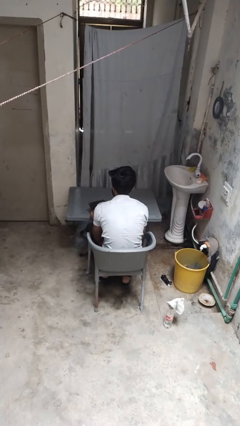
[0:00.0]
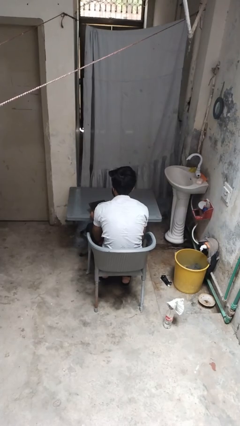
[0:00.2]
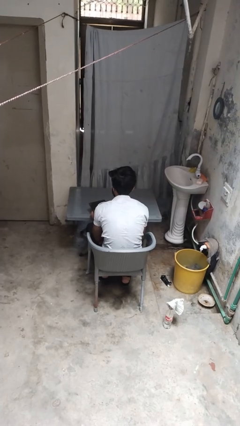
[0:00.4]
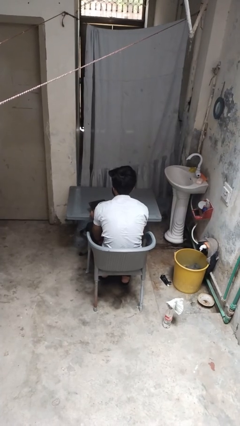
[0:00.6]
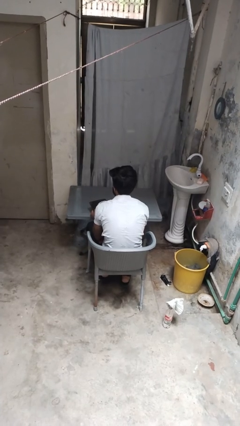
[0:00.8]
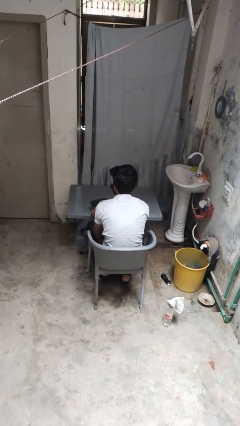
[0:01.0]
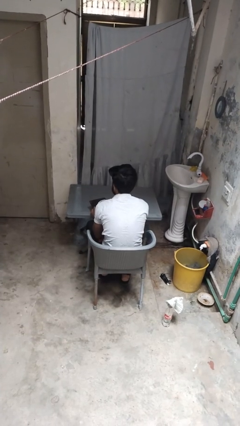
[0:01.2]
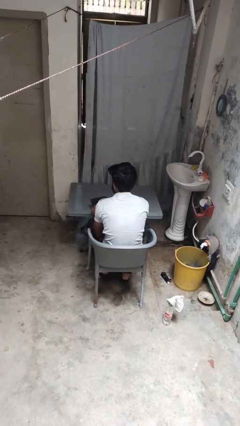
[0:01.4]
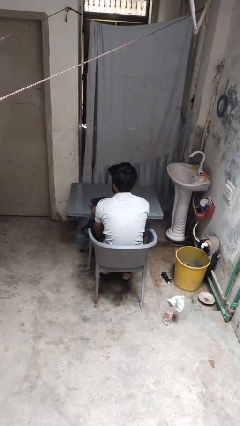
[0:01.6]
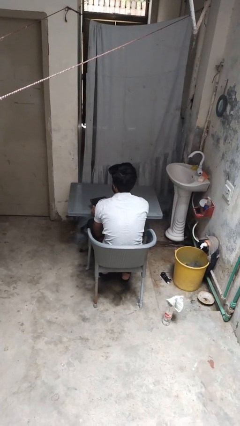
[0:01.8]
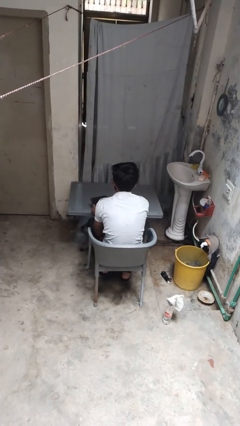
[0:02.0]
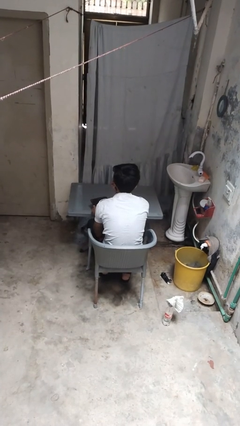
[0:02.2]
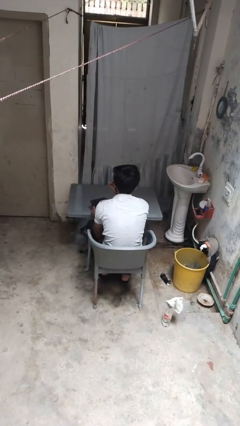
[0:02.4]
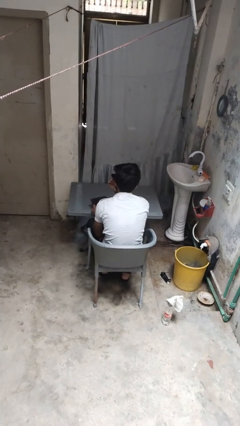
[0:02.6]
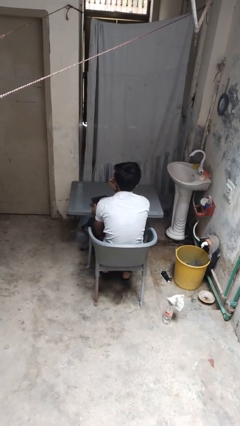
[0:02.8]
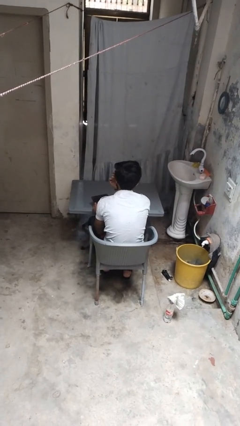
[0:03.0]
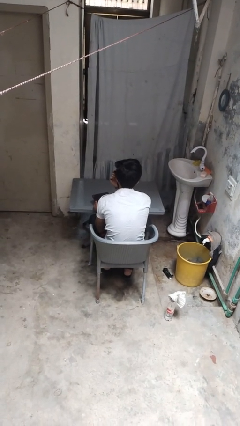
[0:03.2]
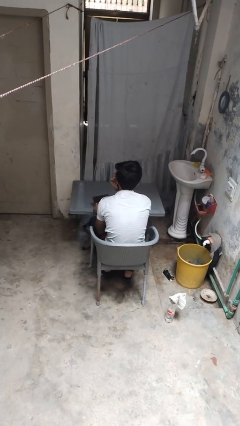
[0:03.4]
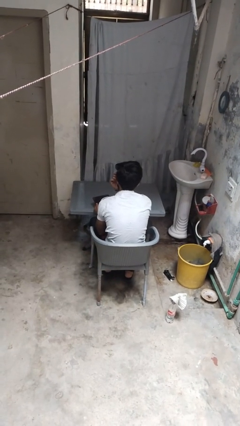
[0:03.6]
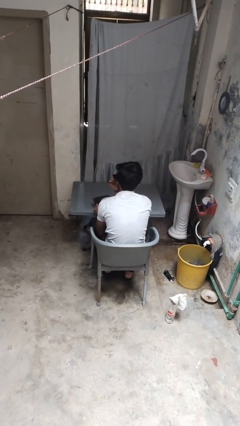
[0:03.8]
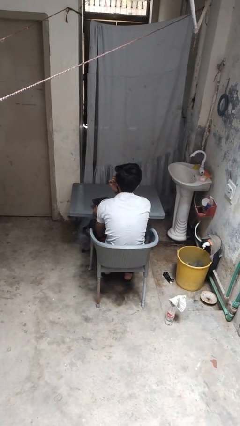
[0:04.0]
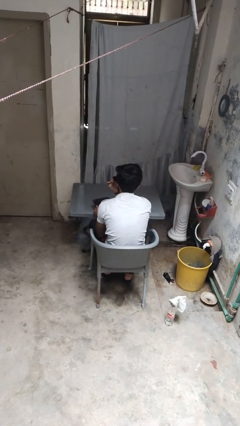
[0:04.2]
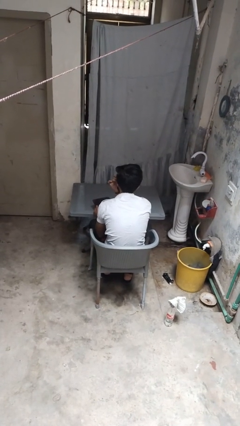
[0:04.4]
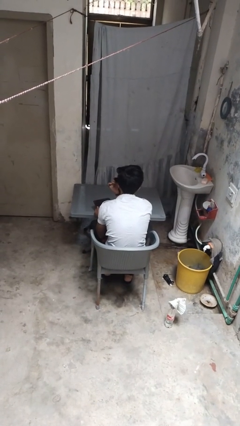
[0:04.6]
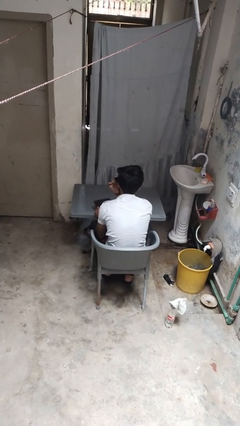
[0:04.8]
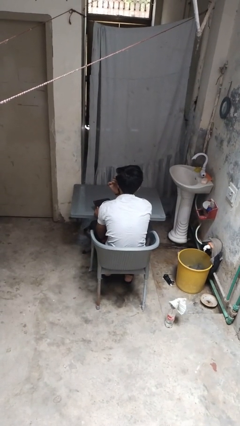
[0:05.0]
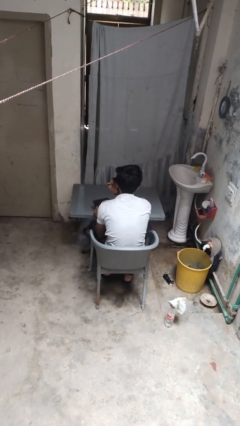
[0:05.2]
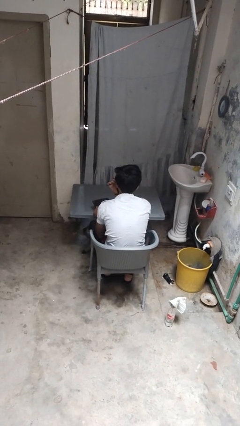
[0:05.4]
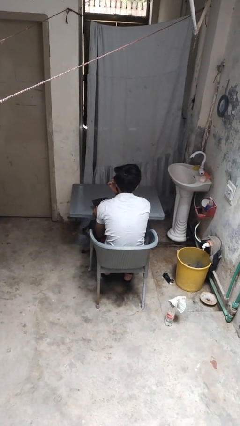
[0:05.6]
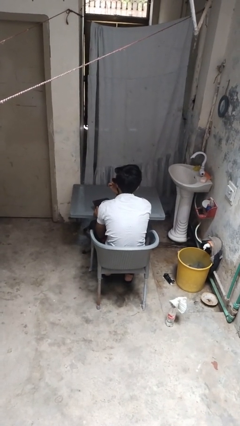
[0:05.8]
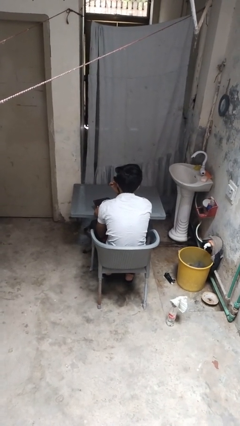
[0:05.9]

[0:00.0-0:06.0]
person applies eye makeup

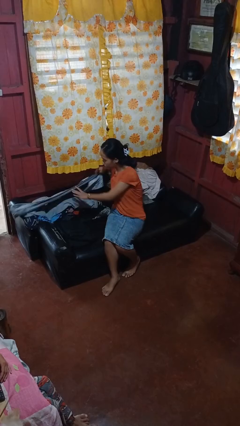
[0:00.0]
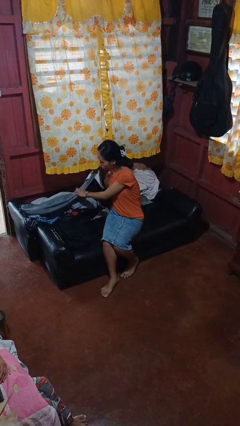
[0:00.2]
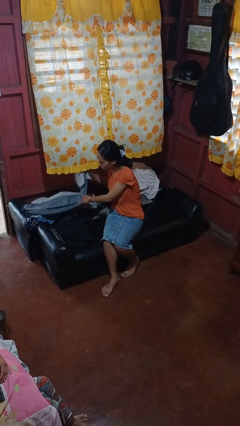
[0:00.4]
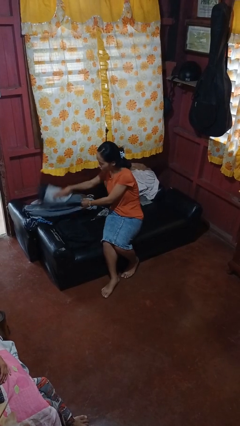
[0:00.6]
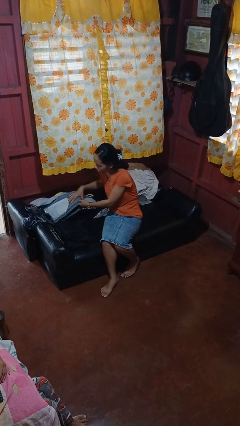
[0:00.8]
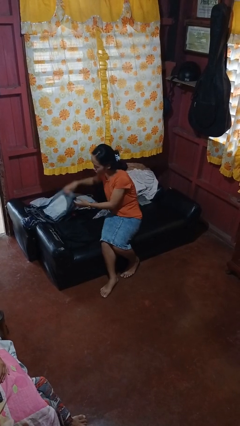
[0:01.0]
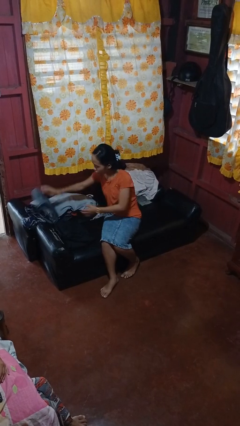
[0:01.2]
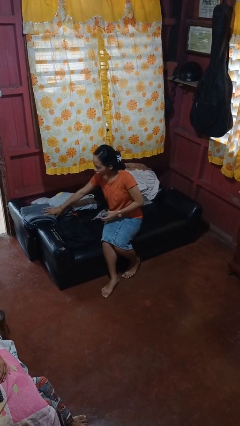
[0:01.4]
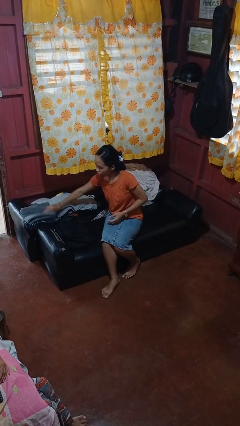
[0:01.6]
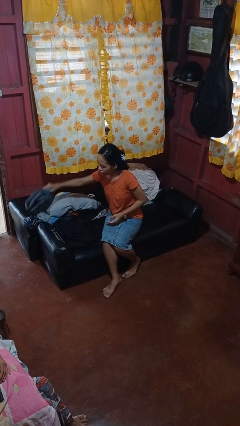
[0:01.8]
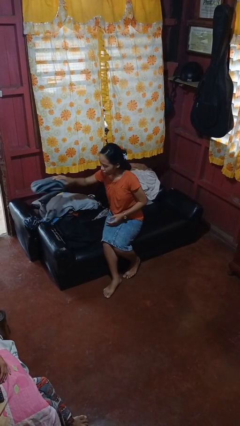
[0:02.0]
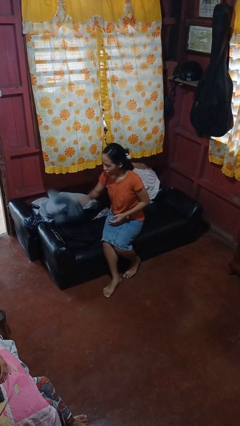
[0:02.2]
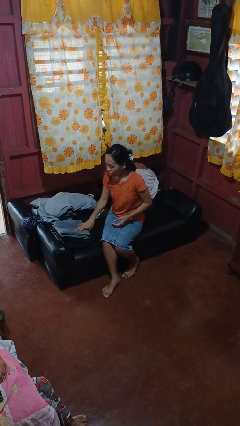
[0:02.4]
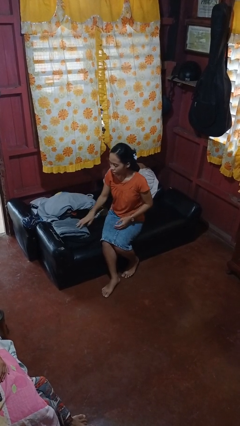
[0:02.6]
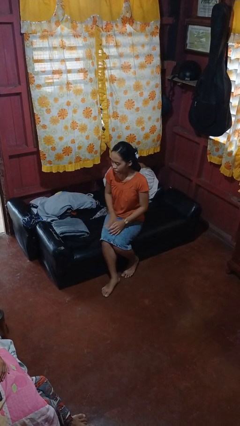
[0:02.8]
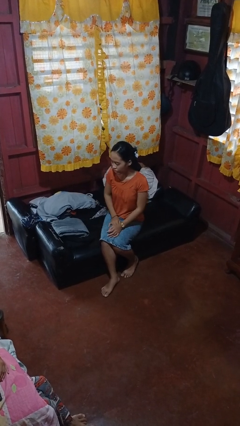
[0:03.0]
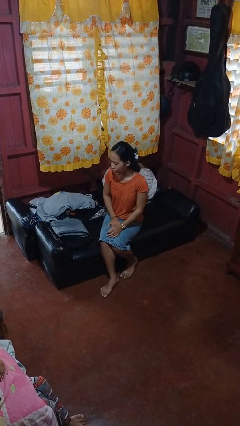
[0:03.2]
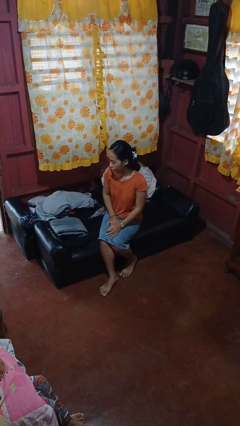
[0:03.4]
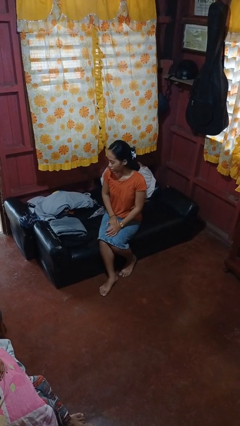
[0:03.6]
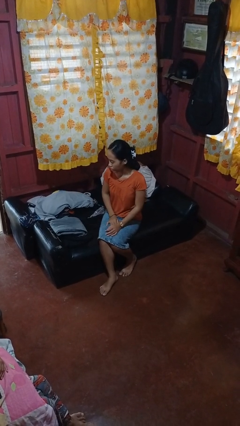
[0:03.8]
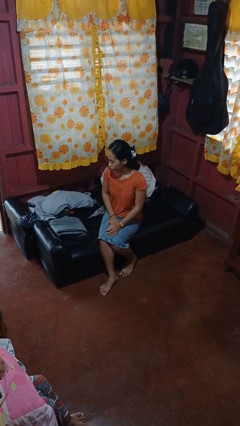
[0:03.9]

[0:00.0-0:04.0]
person folds pants

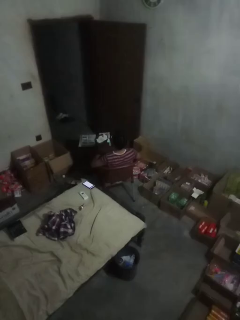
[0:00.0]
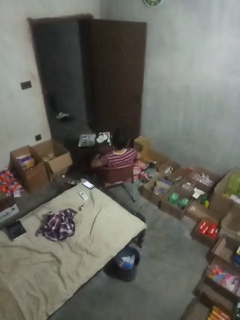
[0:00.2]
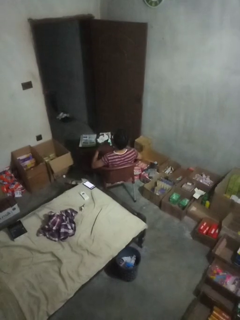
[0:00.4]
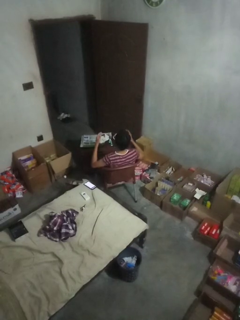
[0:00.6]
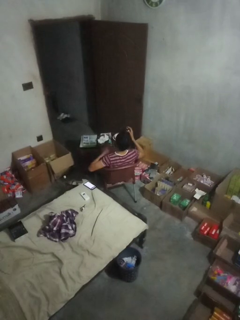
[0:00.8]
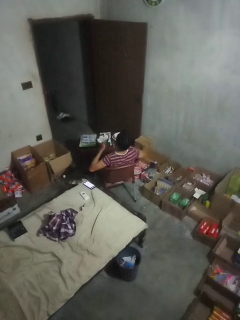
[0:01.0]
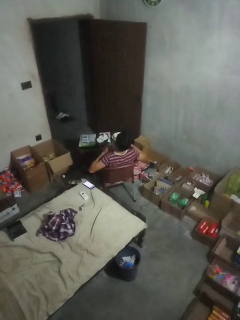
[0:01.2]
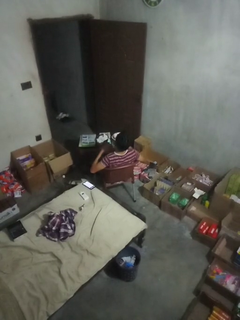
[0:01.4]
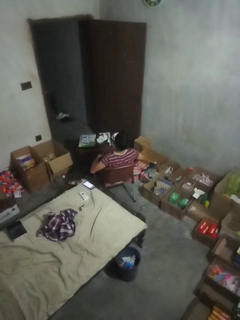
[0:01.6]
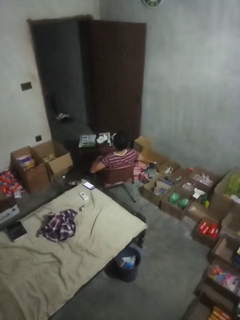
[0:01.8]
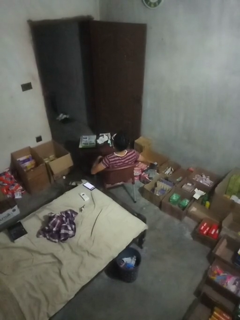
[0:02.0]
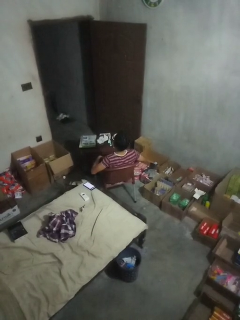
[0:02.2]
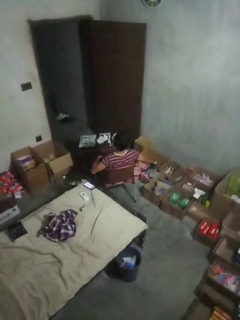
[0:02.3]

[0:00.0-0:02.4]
person drums on chest

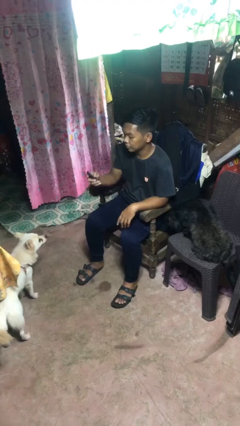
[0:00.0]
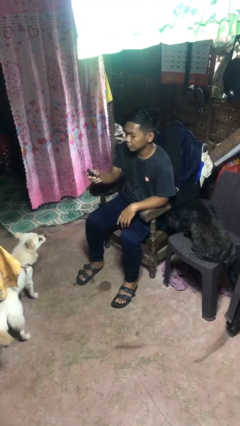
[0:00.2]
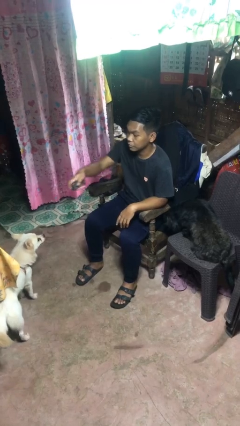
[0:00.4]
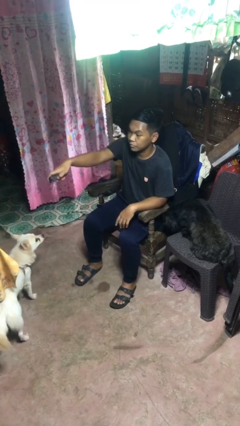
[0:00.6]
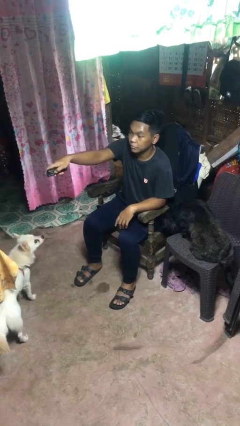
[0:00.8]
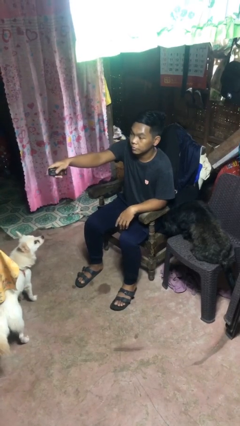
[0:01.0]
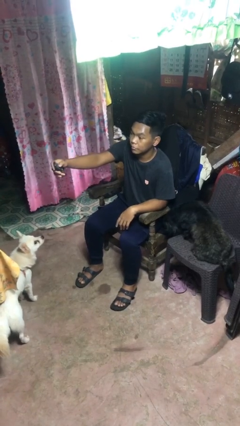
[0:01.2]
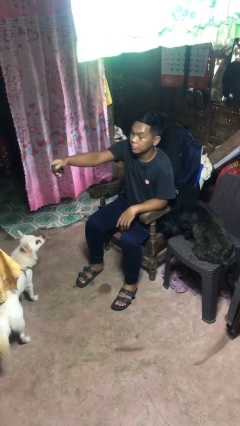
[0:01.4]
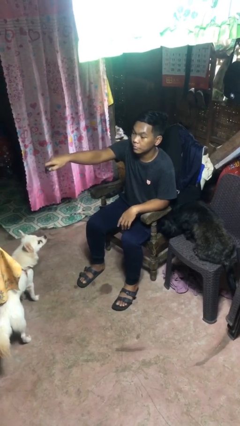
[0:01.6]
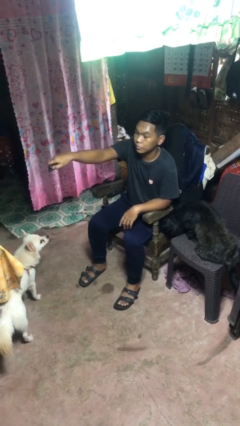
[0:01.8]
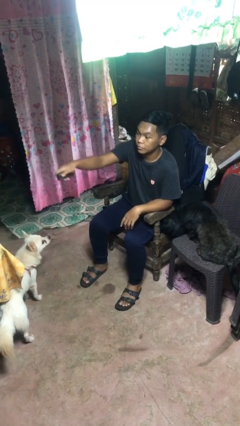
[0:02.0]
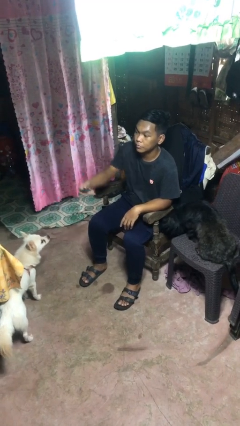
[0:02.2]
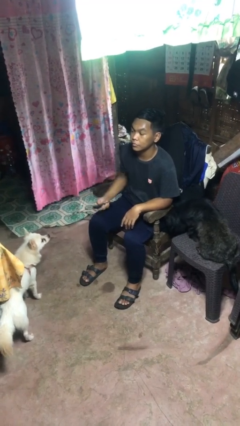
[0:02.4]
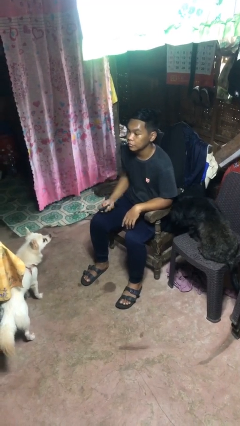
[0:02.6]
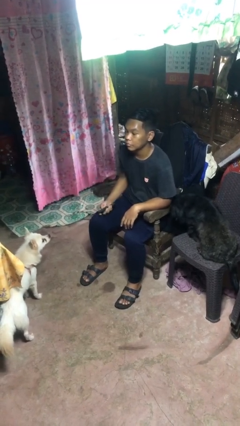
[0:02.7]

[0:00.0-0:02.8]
person uses television remote

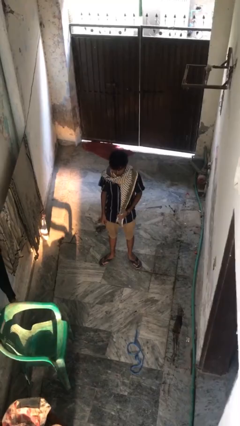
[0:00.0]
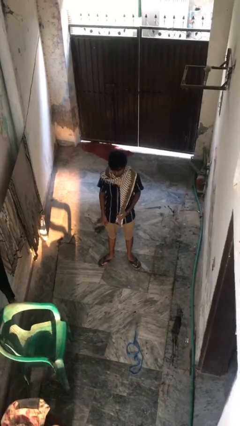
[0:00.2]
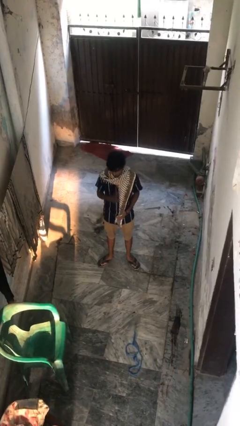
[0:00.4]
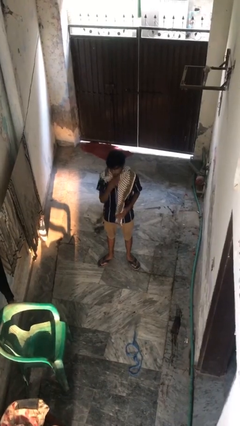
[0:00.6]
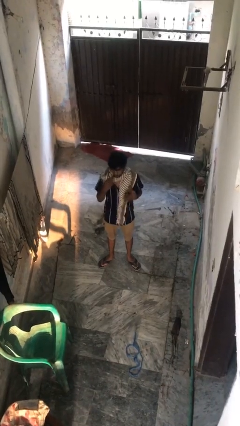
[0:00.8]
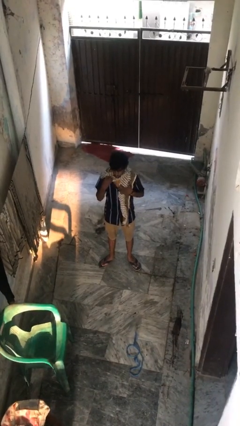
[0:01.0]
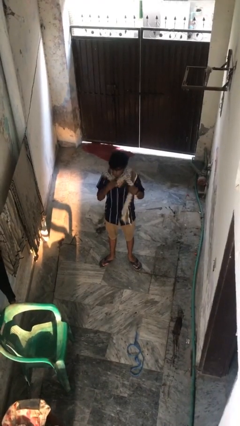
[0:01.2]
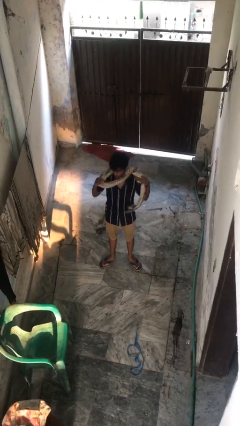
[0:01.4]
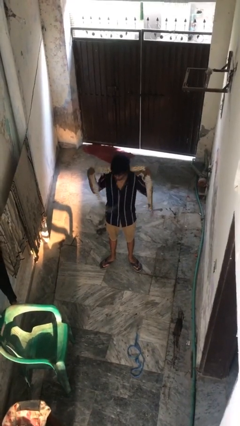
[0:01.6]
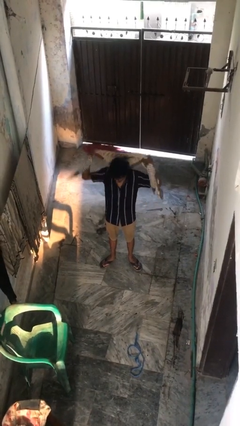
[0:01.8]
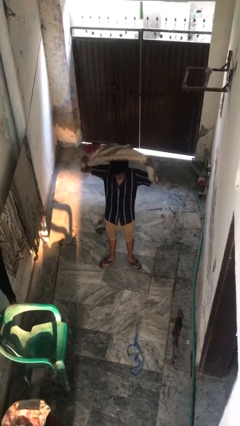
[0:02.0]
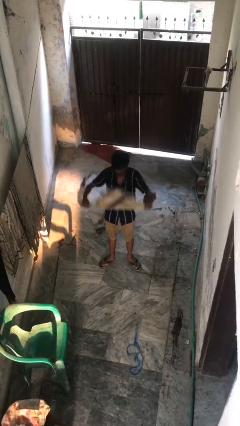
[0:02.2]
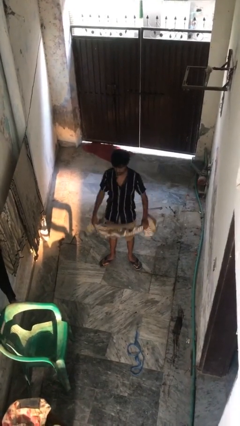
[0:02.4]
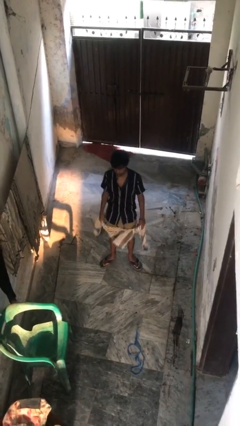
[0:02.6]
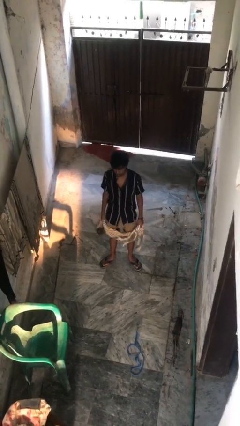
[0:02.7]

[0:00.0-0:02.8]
person takes off scarf

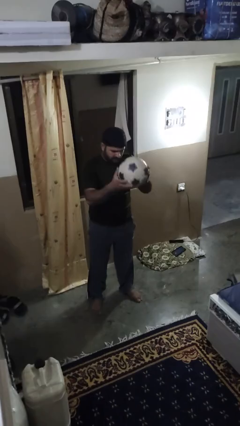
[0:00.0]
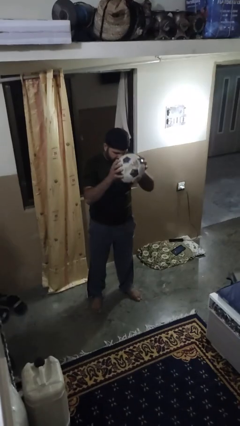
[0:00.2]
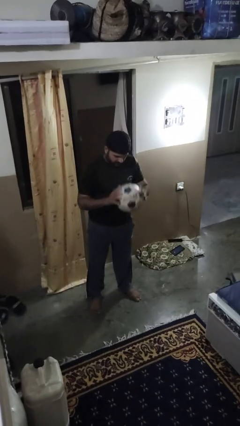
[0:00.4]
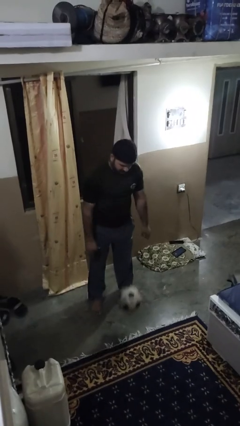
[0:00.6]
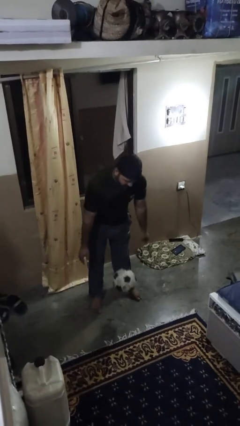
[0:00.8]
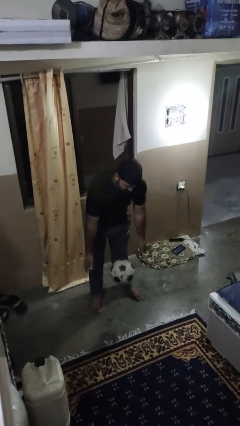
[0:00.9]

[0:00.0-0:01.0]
person bounces ball on floor
